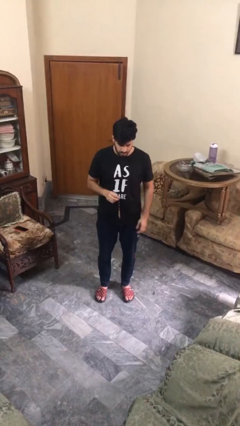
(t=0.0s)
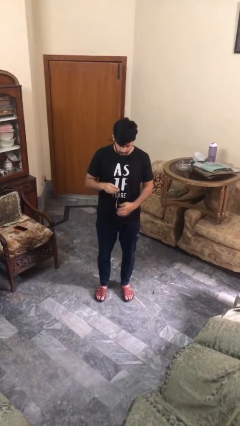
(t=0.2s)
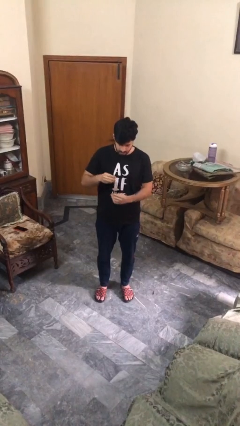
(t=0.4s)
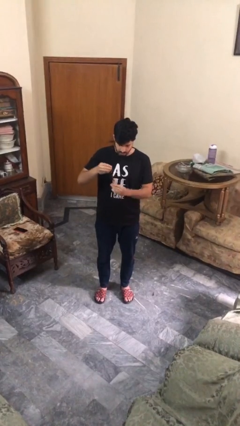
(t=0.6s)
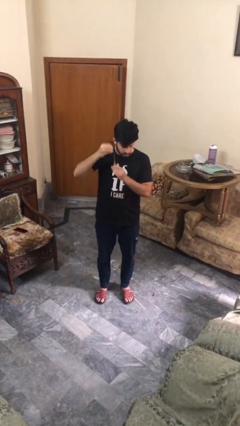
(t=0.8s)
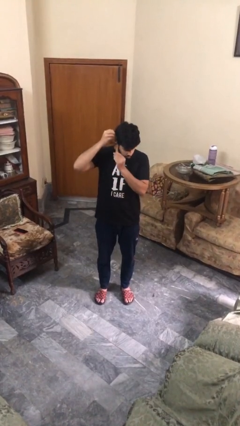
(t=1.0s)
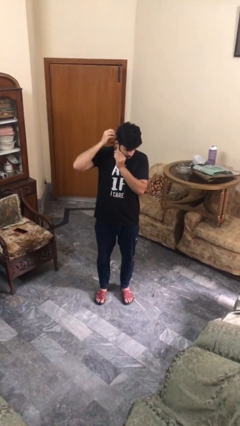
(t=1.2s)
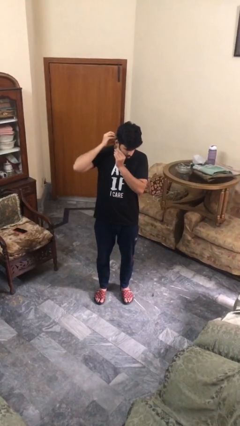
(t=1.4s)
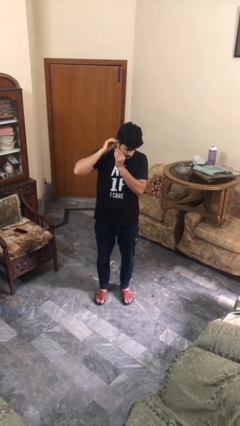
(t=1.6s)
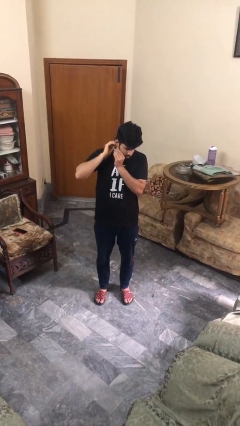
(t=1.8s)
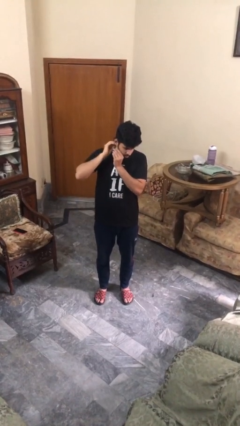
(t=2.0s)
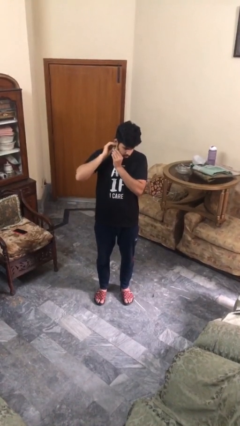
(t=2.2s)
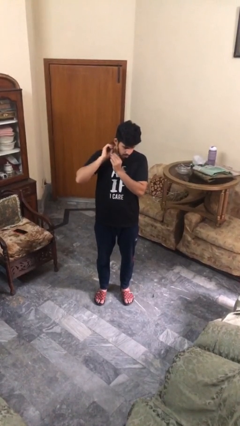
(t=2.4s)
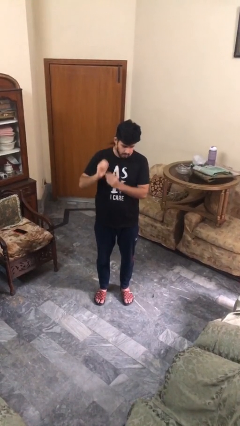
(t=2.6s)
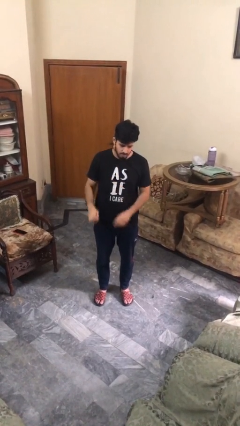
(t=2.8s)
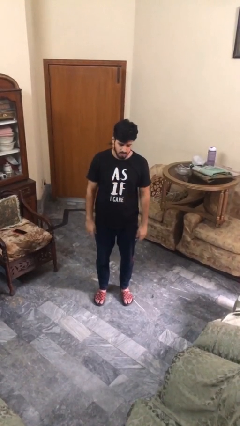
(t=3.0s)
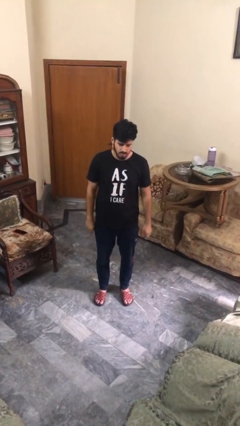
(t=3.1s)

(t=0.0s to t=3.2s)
person puts on earrings

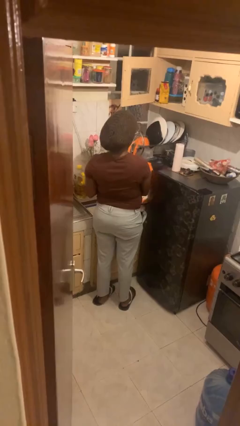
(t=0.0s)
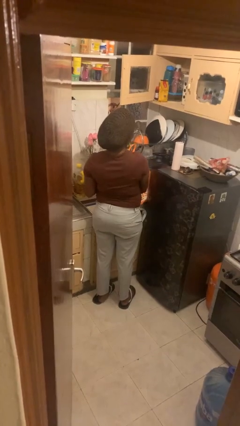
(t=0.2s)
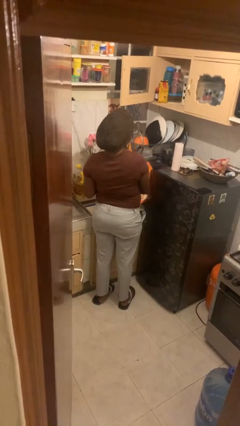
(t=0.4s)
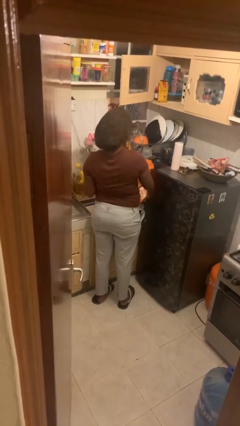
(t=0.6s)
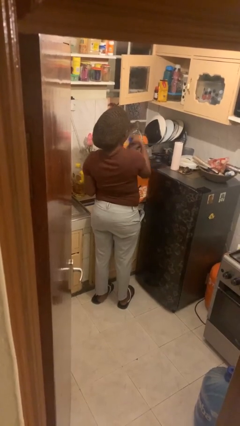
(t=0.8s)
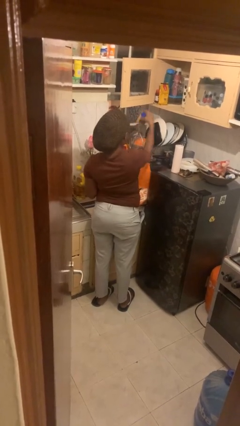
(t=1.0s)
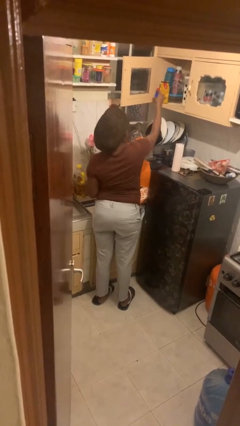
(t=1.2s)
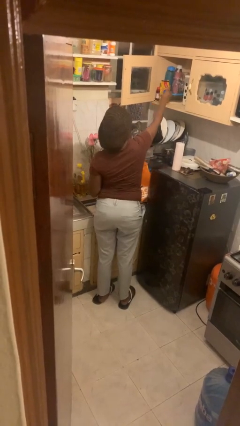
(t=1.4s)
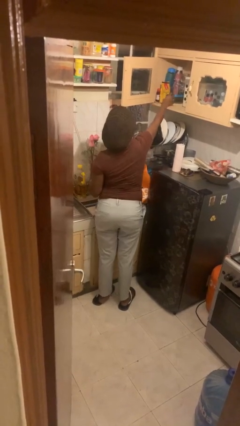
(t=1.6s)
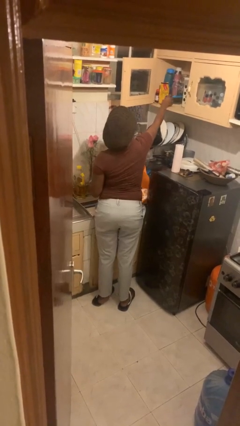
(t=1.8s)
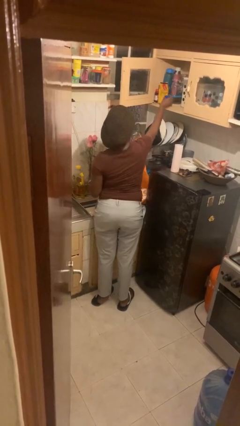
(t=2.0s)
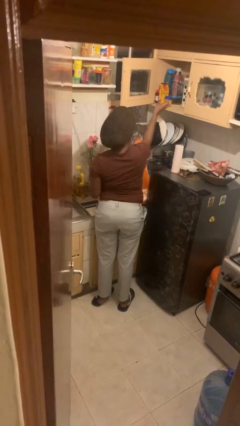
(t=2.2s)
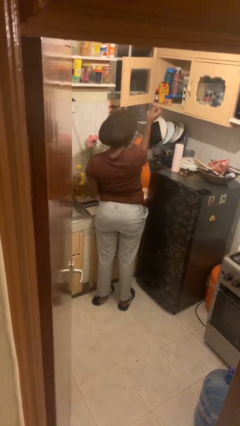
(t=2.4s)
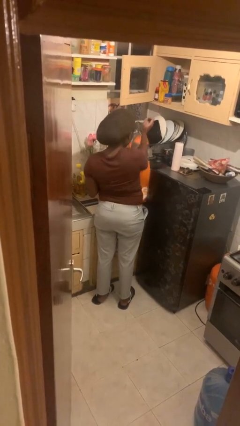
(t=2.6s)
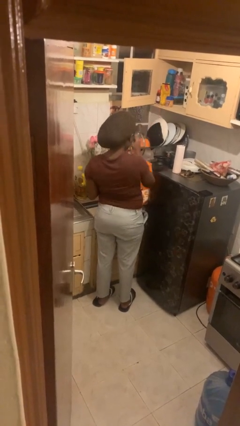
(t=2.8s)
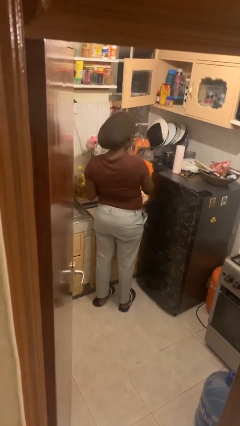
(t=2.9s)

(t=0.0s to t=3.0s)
person loads groceries into cabinet

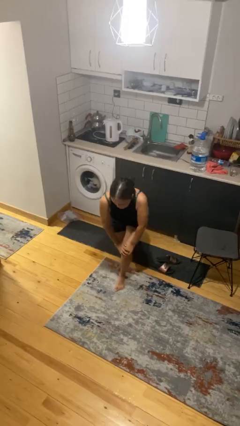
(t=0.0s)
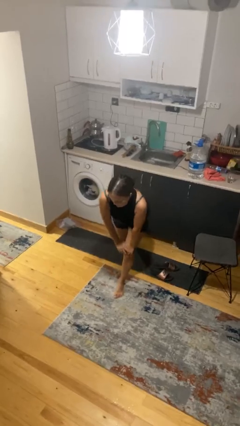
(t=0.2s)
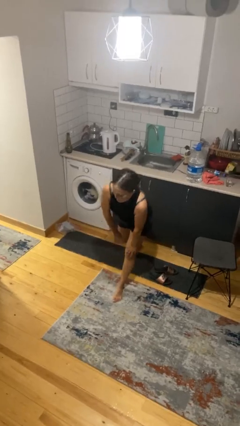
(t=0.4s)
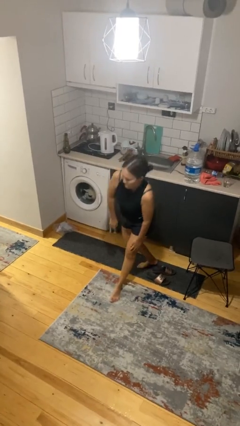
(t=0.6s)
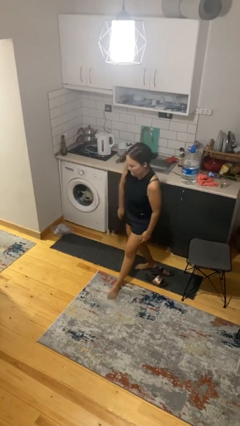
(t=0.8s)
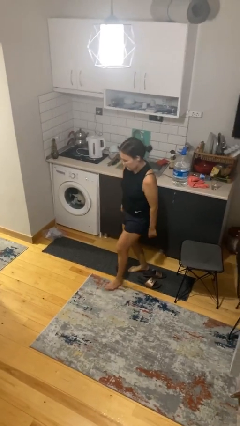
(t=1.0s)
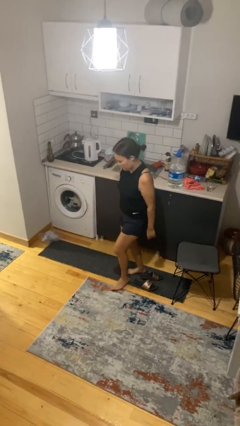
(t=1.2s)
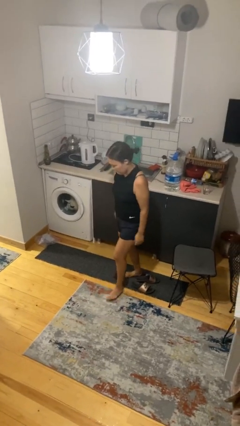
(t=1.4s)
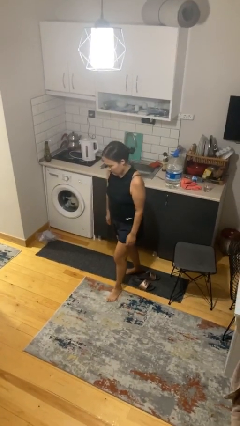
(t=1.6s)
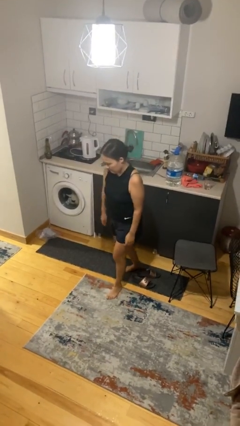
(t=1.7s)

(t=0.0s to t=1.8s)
person stands up from floor

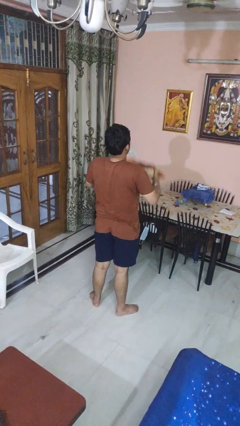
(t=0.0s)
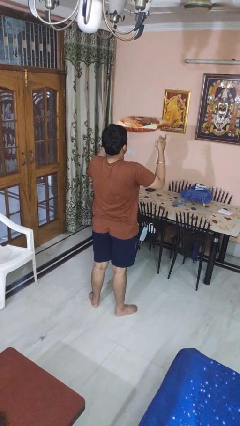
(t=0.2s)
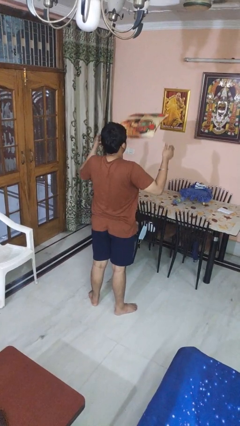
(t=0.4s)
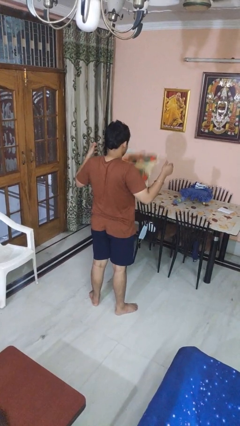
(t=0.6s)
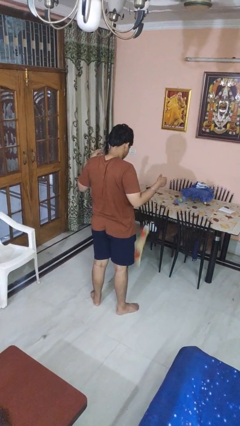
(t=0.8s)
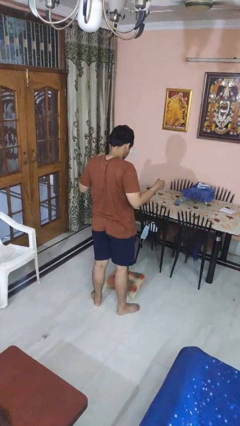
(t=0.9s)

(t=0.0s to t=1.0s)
person throws object into air

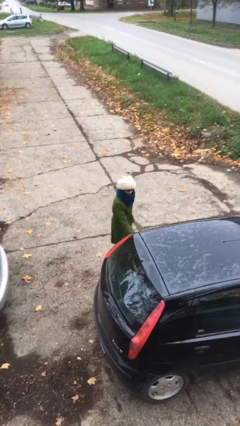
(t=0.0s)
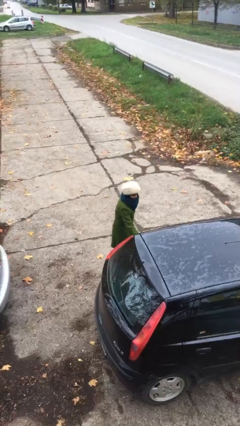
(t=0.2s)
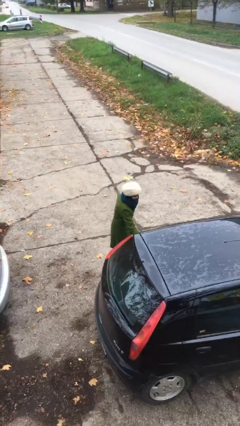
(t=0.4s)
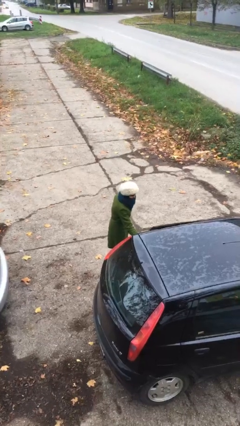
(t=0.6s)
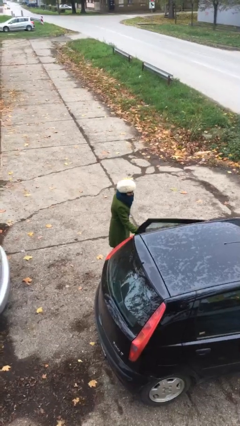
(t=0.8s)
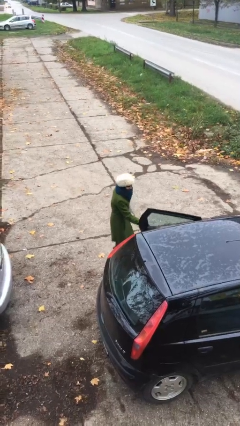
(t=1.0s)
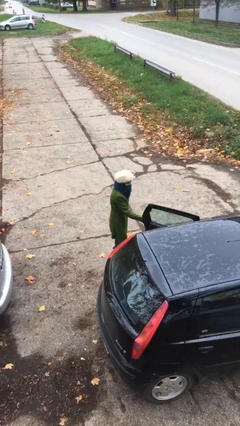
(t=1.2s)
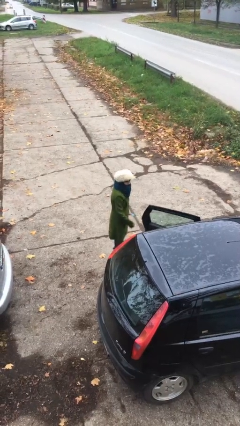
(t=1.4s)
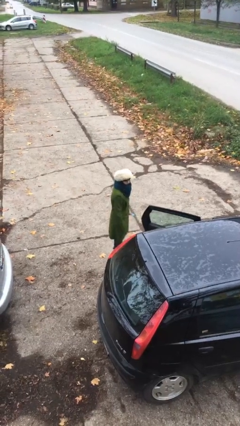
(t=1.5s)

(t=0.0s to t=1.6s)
person opens car door

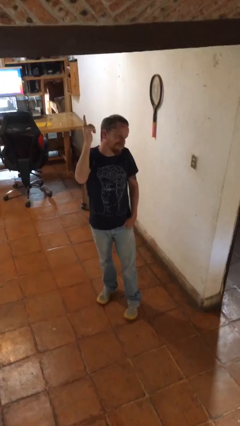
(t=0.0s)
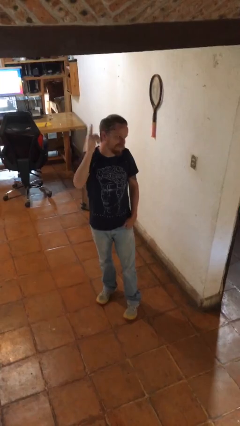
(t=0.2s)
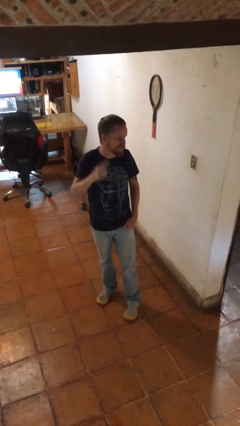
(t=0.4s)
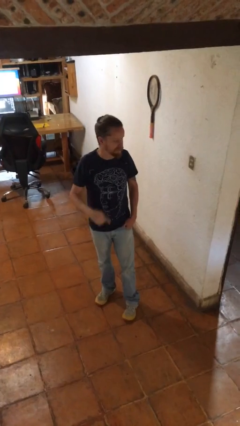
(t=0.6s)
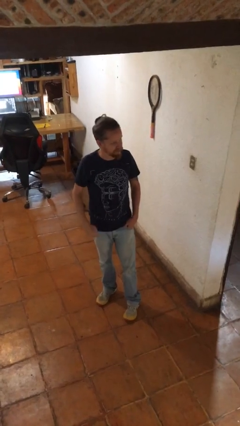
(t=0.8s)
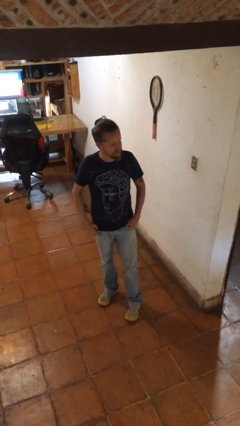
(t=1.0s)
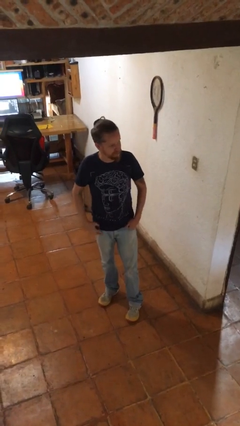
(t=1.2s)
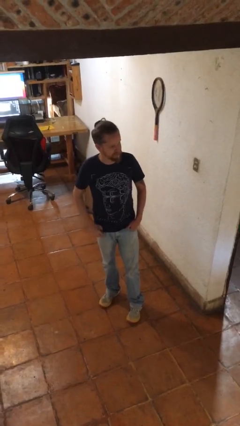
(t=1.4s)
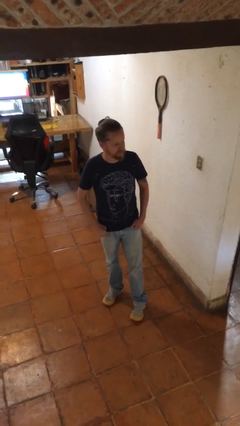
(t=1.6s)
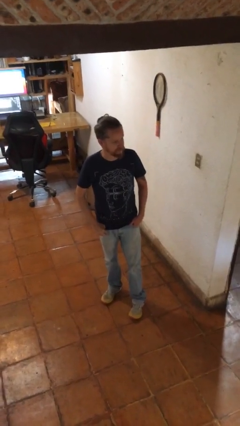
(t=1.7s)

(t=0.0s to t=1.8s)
person gestures lower hand

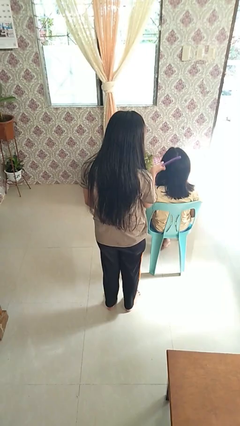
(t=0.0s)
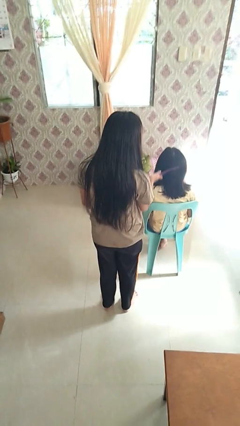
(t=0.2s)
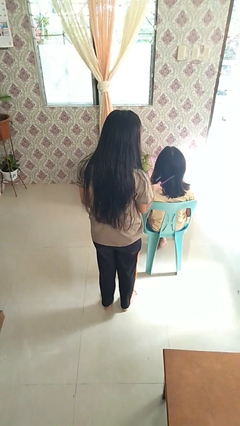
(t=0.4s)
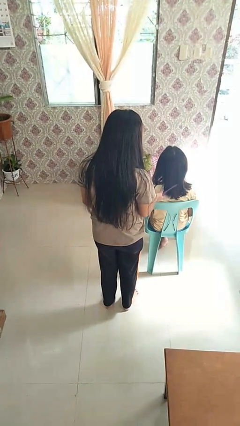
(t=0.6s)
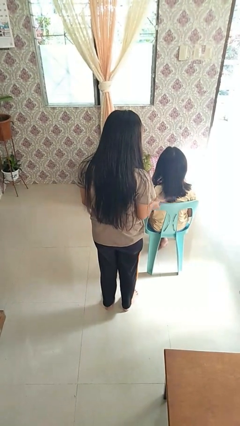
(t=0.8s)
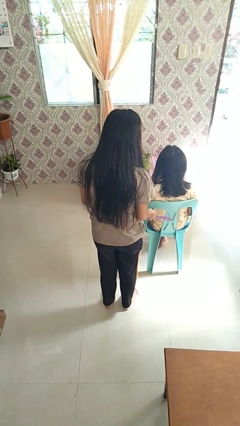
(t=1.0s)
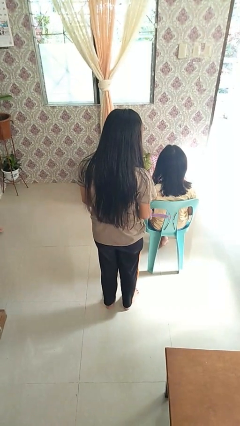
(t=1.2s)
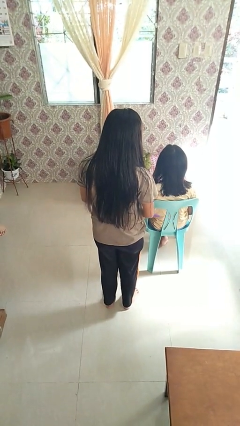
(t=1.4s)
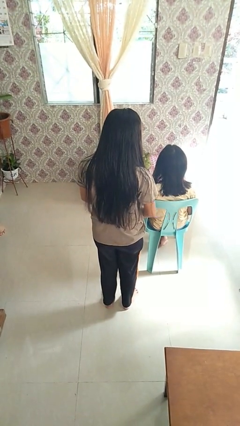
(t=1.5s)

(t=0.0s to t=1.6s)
person brushes hair of person

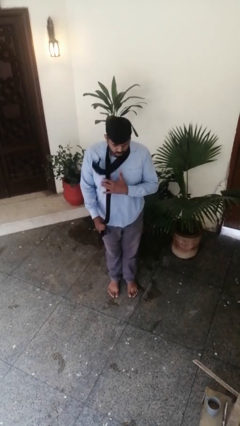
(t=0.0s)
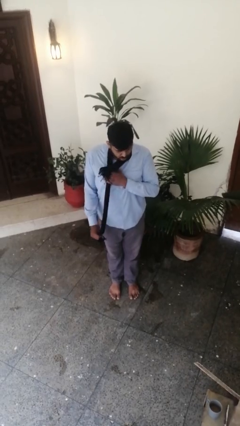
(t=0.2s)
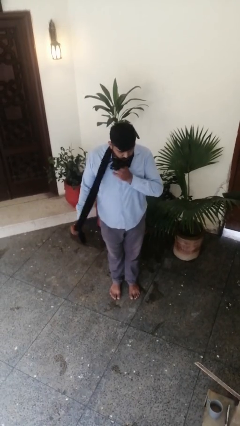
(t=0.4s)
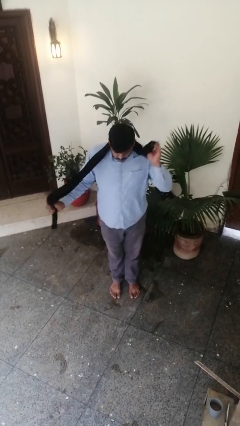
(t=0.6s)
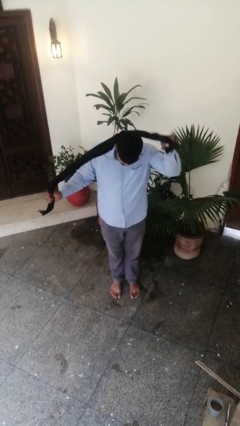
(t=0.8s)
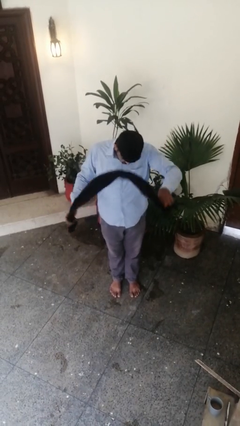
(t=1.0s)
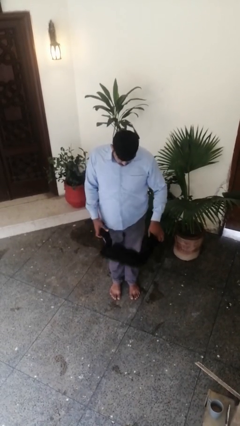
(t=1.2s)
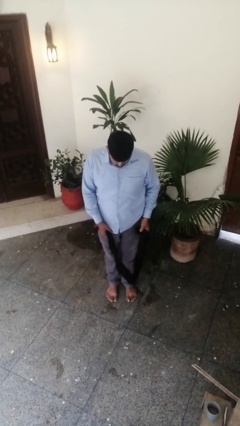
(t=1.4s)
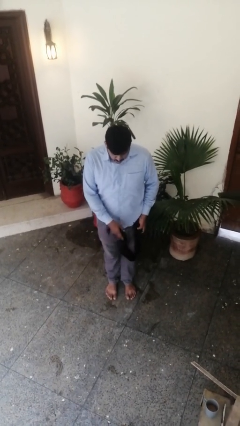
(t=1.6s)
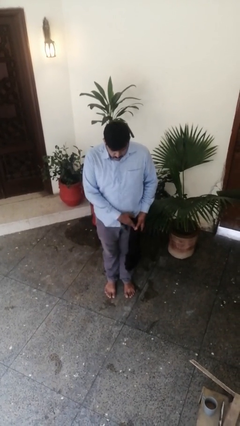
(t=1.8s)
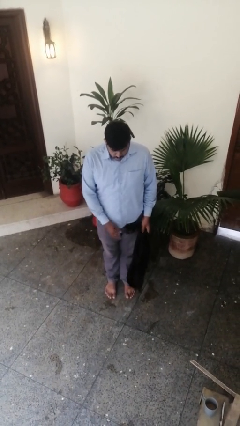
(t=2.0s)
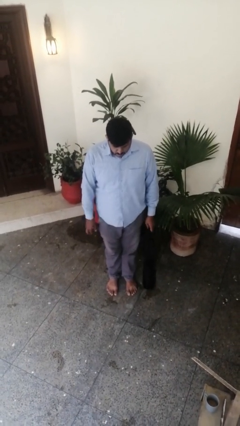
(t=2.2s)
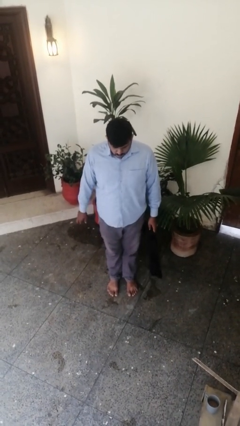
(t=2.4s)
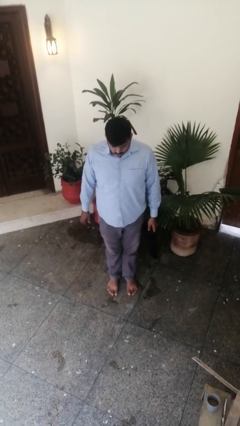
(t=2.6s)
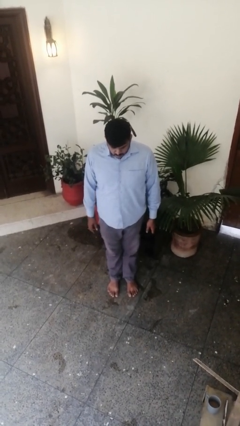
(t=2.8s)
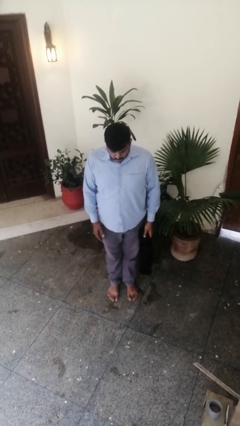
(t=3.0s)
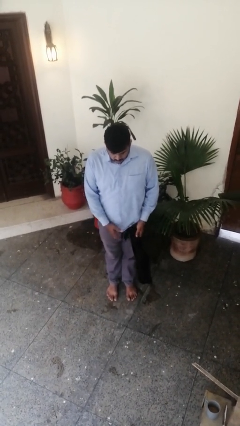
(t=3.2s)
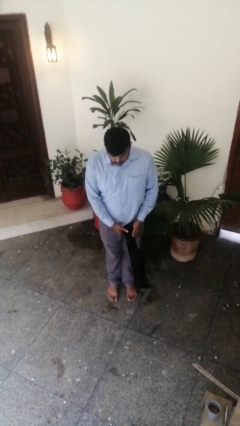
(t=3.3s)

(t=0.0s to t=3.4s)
person takes off scarf
